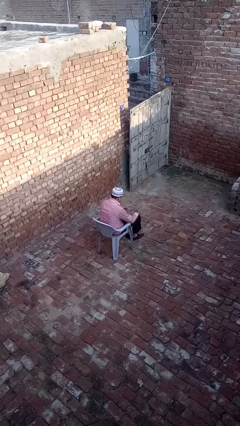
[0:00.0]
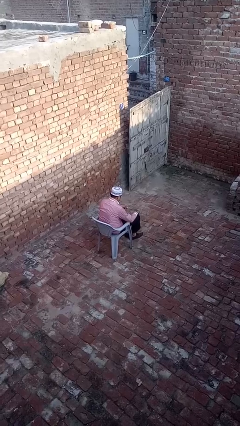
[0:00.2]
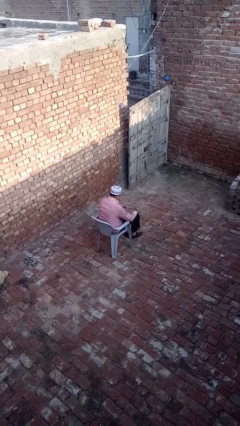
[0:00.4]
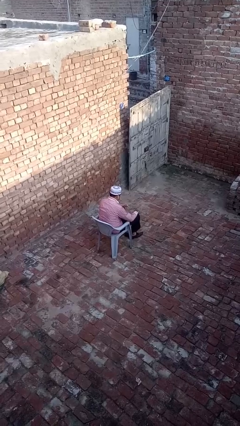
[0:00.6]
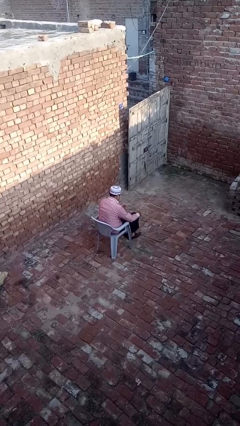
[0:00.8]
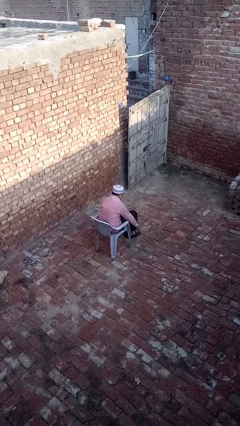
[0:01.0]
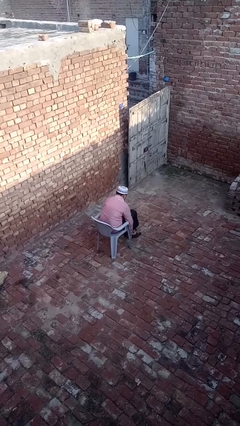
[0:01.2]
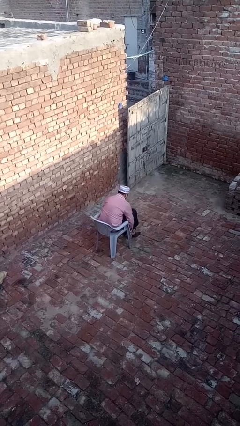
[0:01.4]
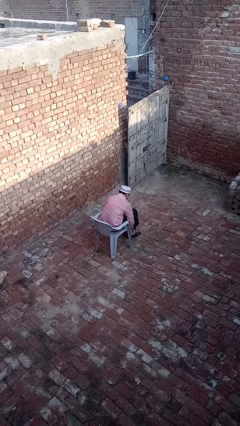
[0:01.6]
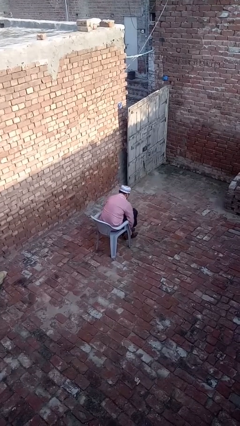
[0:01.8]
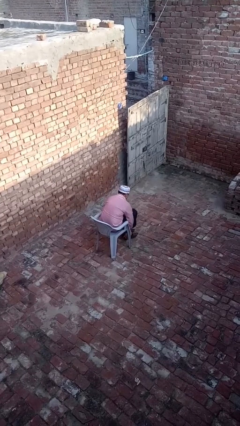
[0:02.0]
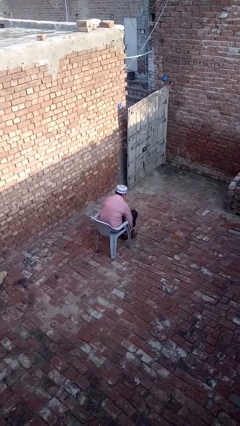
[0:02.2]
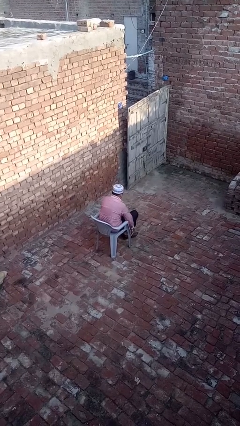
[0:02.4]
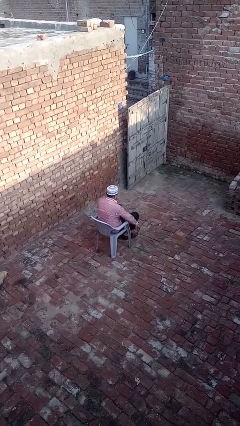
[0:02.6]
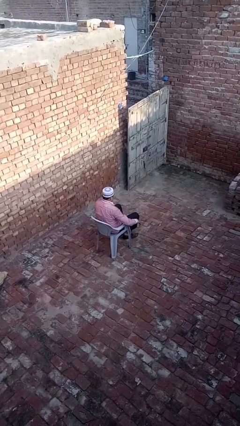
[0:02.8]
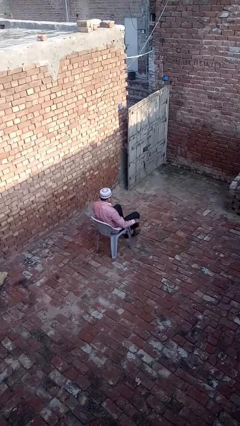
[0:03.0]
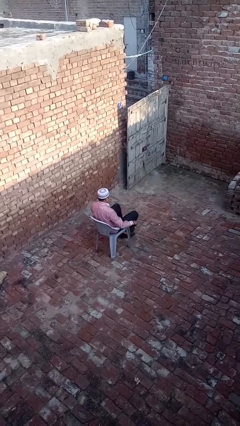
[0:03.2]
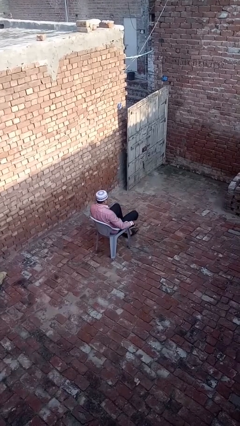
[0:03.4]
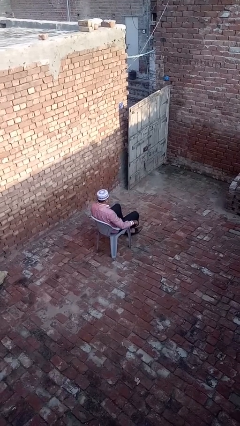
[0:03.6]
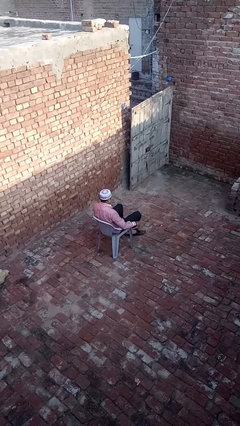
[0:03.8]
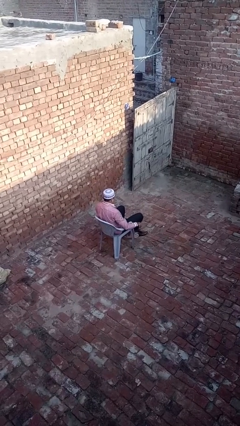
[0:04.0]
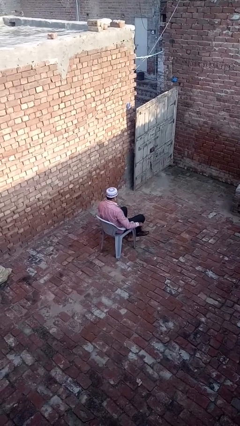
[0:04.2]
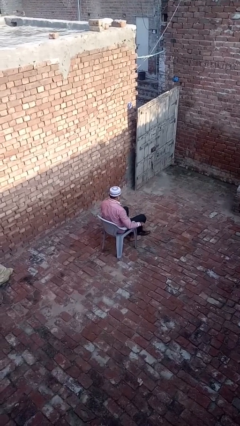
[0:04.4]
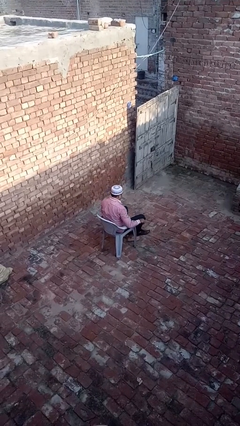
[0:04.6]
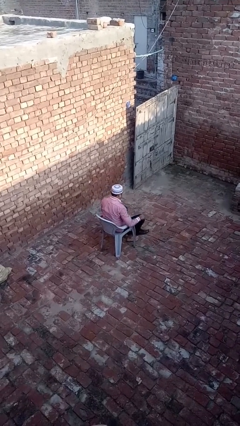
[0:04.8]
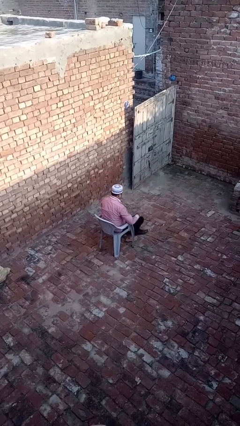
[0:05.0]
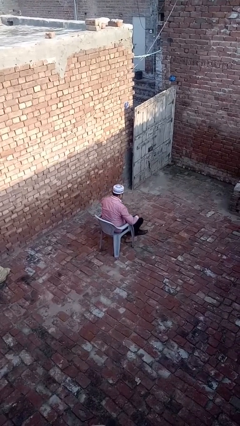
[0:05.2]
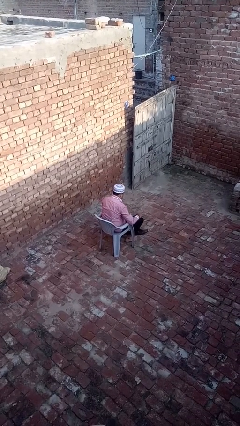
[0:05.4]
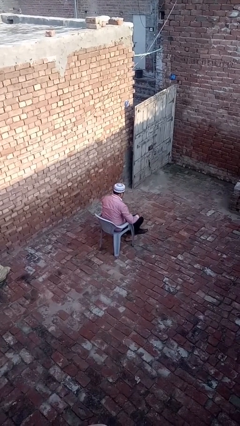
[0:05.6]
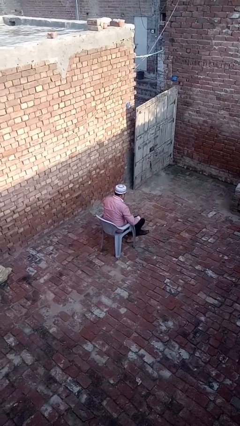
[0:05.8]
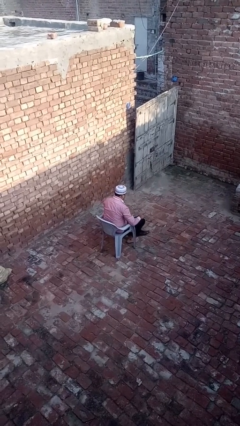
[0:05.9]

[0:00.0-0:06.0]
person takes off shoes

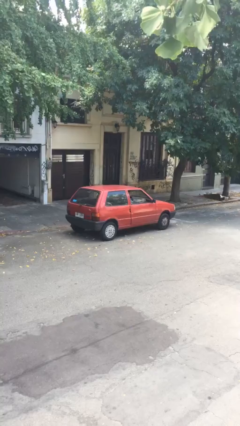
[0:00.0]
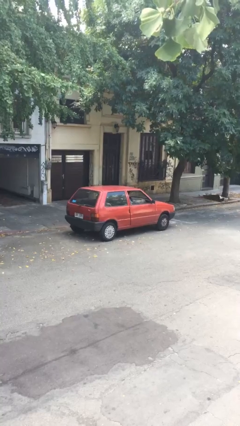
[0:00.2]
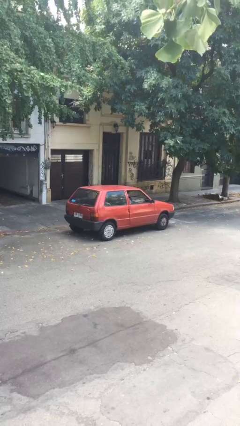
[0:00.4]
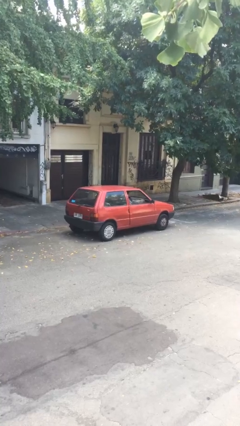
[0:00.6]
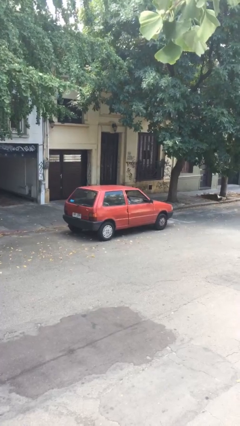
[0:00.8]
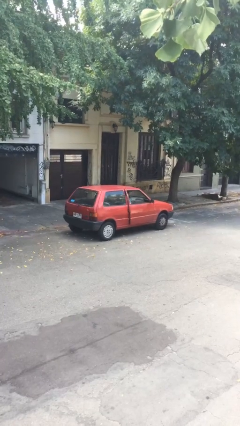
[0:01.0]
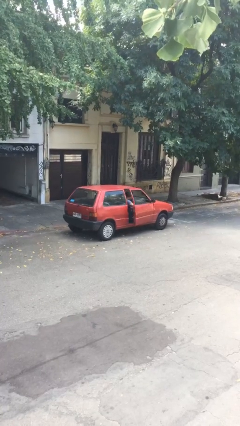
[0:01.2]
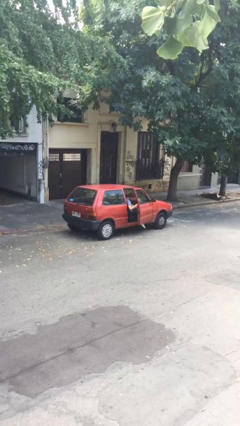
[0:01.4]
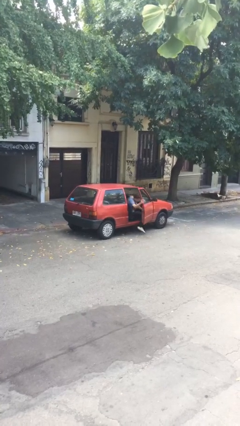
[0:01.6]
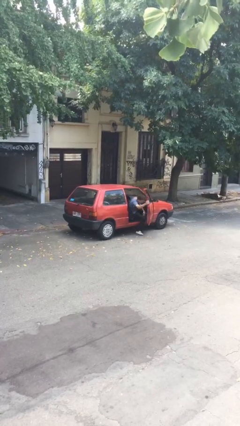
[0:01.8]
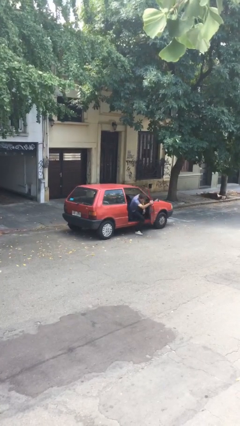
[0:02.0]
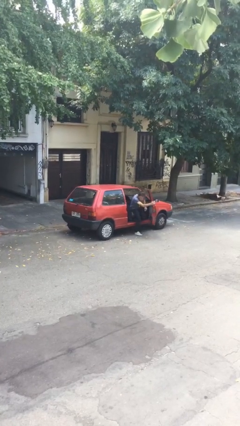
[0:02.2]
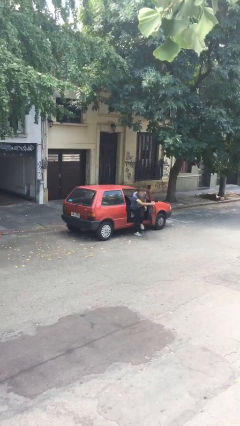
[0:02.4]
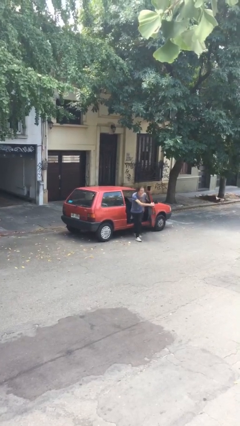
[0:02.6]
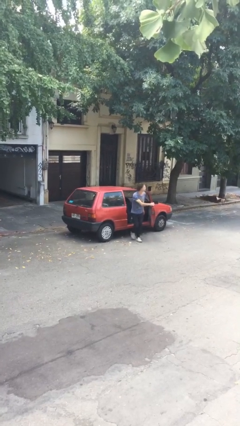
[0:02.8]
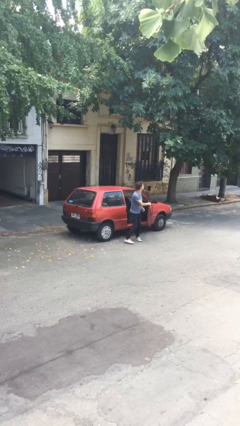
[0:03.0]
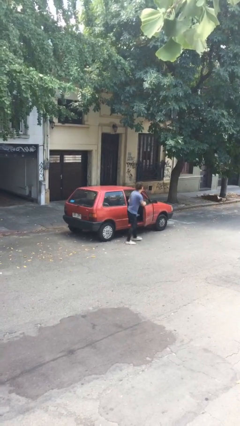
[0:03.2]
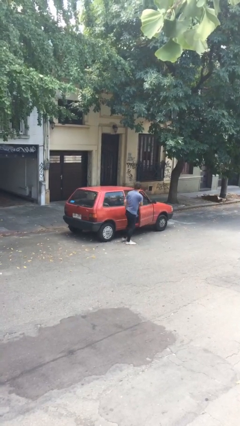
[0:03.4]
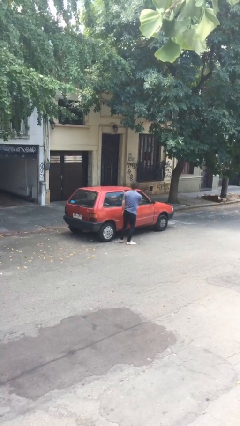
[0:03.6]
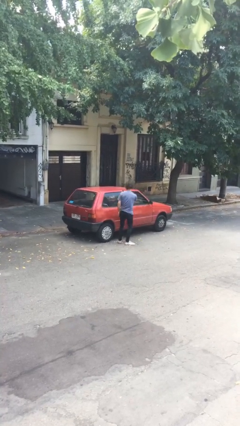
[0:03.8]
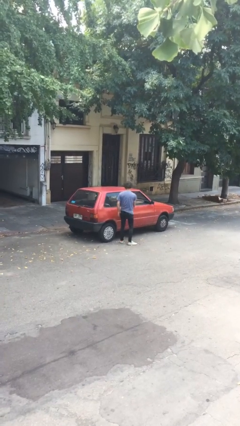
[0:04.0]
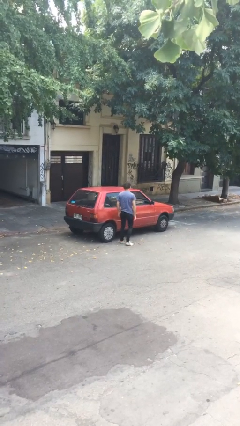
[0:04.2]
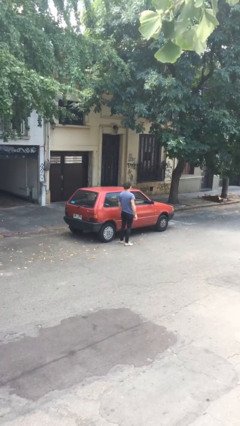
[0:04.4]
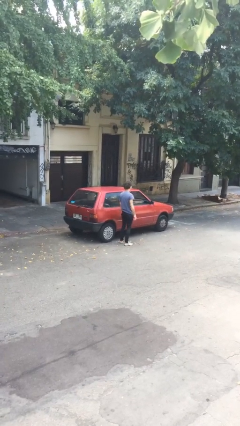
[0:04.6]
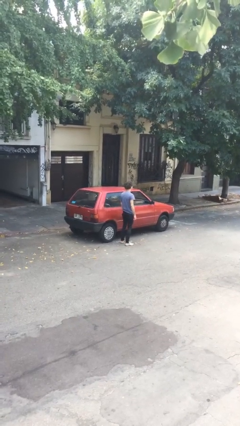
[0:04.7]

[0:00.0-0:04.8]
car drops off person

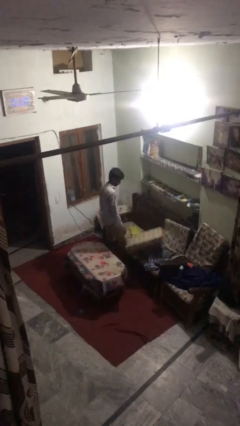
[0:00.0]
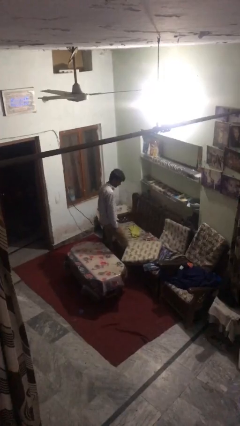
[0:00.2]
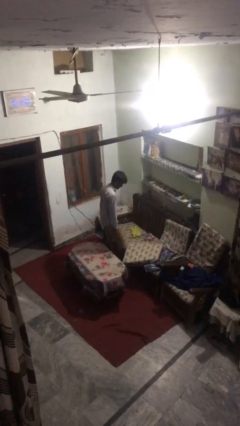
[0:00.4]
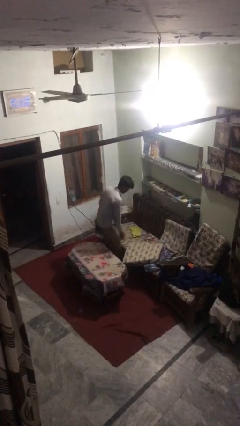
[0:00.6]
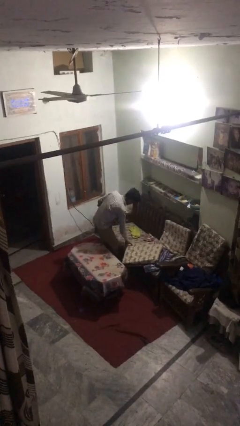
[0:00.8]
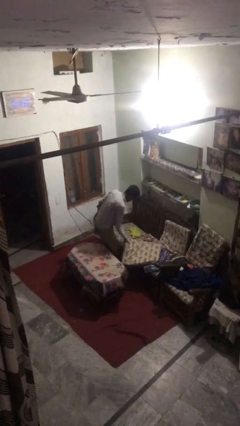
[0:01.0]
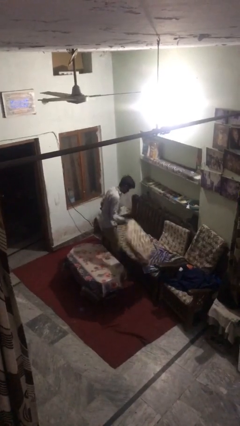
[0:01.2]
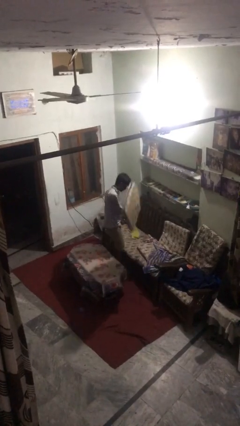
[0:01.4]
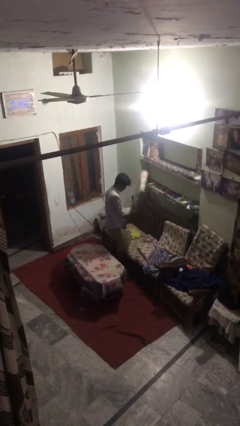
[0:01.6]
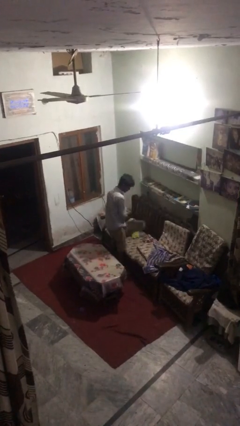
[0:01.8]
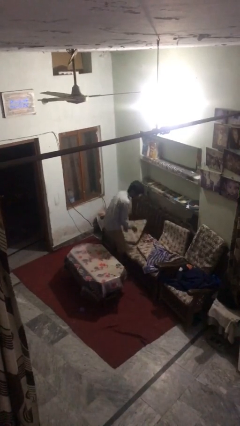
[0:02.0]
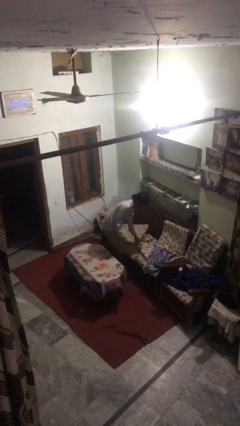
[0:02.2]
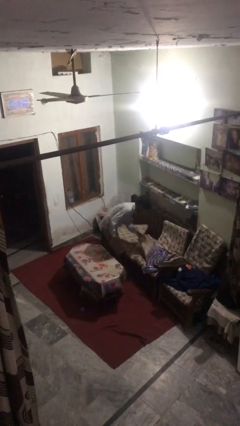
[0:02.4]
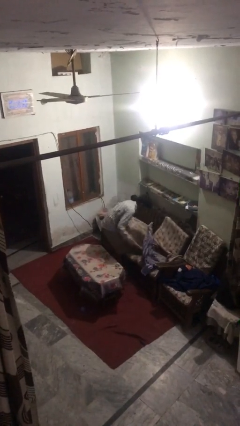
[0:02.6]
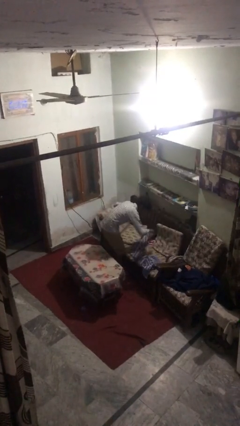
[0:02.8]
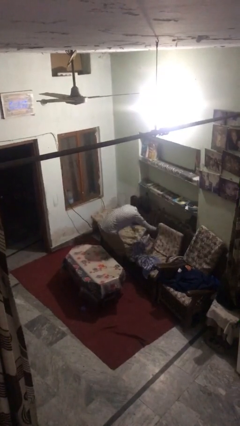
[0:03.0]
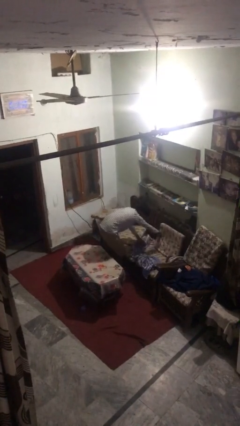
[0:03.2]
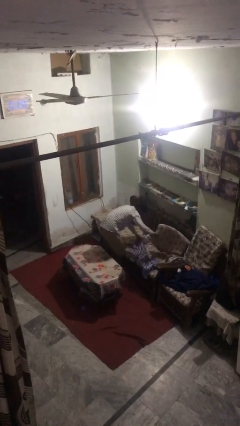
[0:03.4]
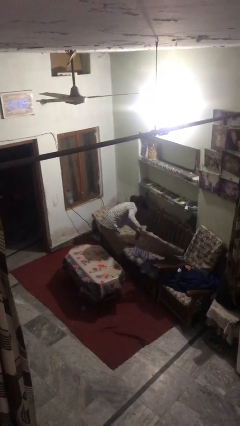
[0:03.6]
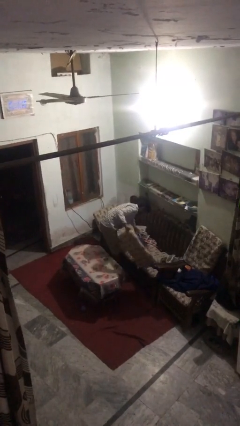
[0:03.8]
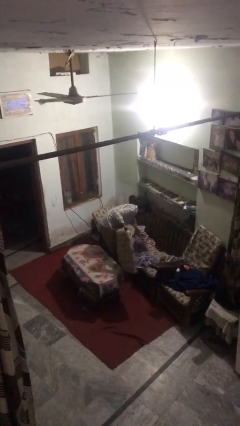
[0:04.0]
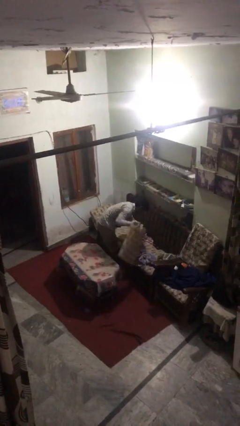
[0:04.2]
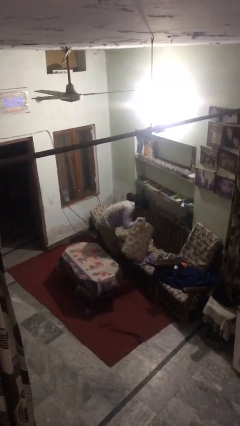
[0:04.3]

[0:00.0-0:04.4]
person searches in couch

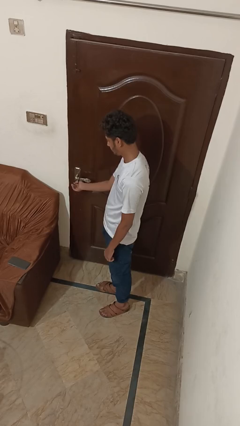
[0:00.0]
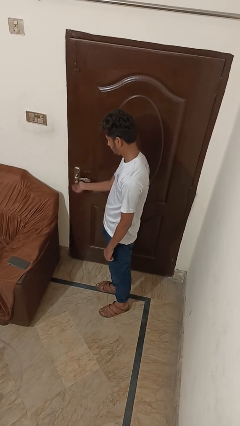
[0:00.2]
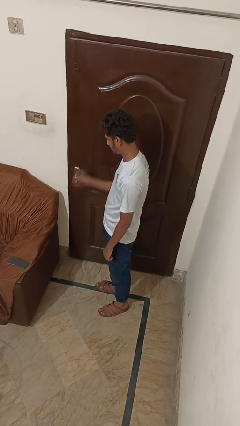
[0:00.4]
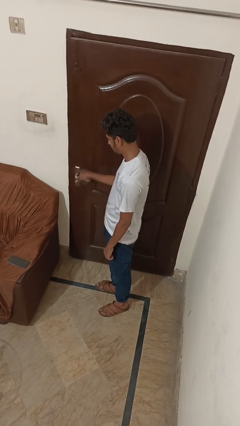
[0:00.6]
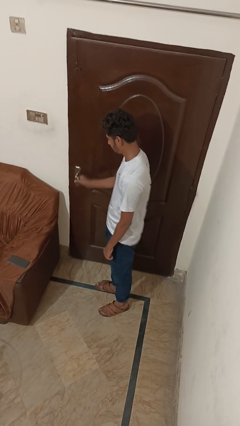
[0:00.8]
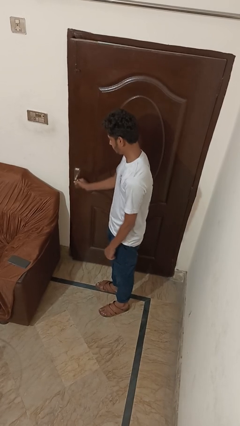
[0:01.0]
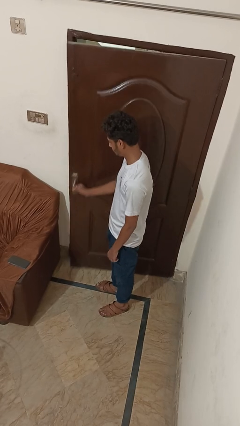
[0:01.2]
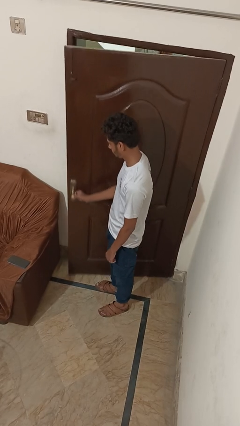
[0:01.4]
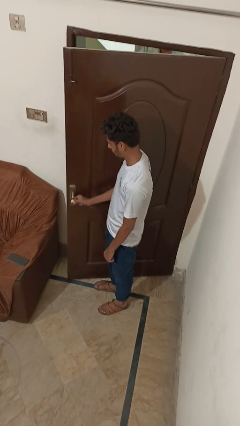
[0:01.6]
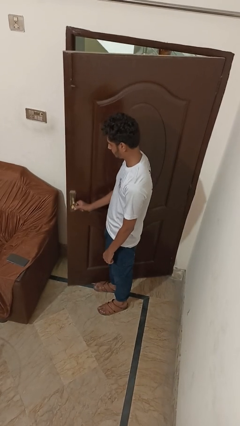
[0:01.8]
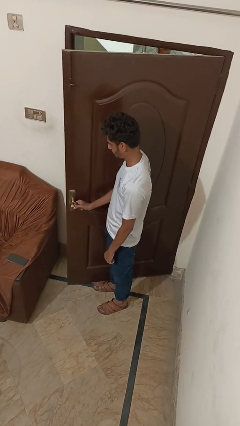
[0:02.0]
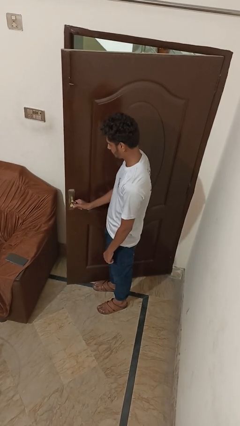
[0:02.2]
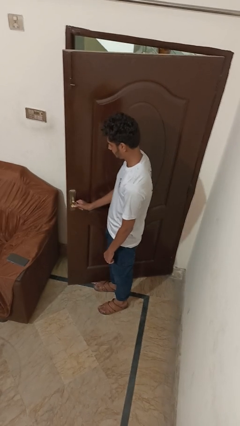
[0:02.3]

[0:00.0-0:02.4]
person opens facility door

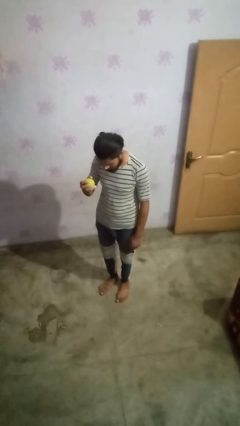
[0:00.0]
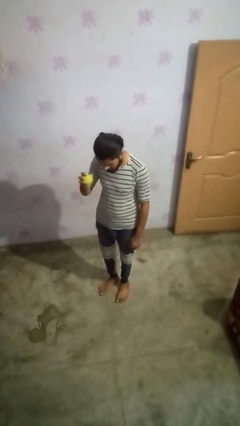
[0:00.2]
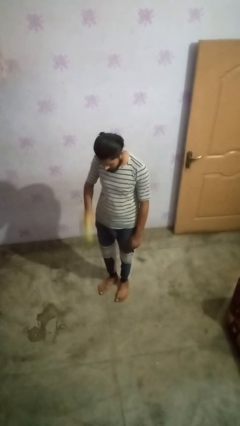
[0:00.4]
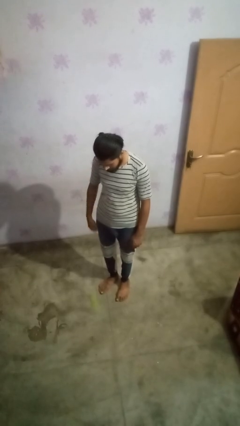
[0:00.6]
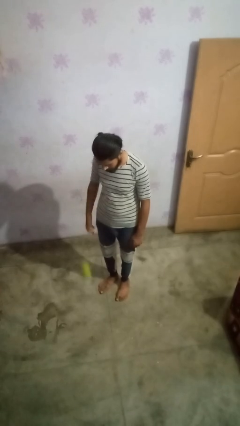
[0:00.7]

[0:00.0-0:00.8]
person bounces ball on floor
